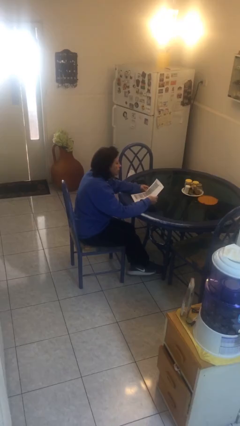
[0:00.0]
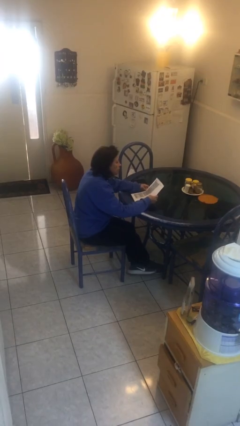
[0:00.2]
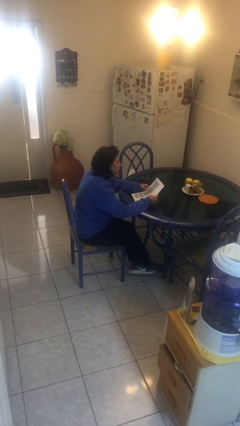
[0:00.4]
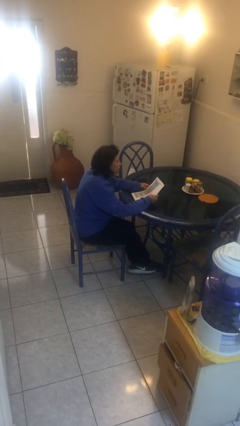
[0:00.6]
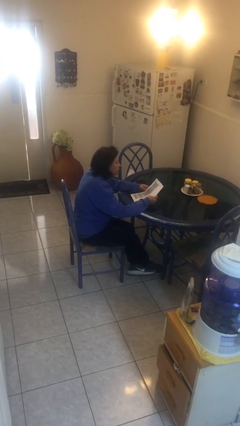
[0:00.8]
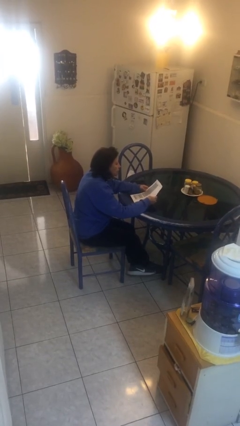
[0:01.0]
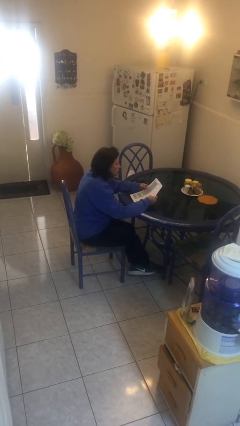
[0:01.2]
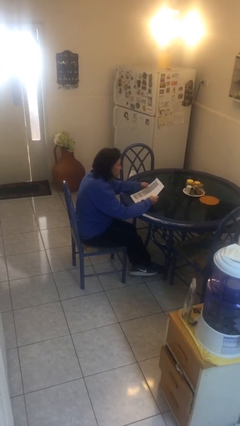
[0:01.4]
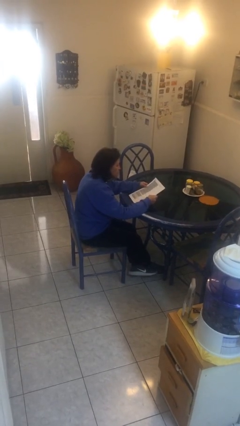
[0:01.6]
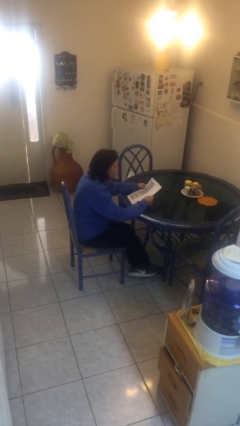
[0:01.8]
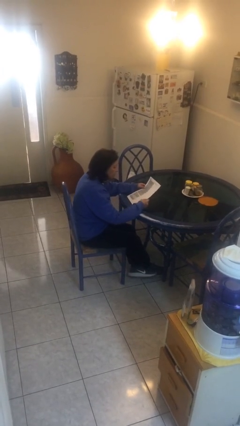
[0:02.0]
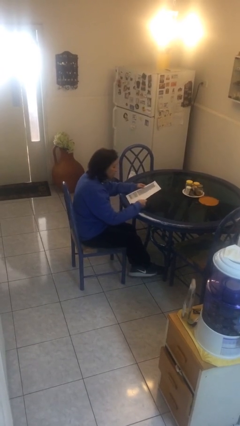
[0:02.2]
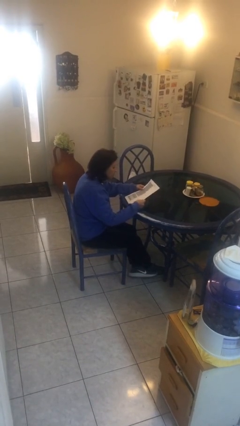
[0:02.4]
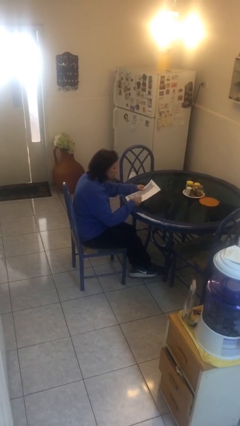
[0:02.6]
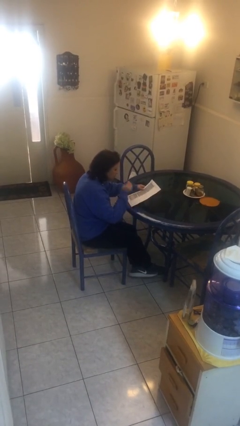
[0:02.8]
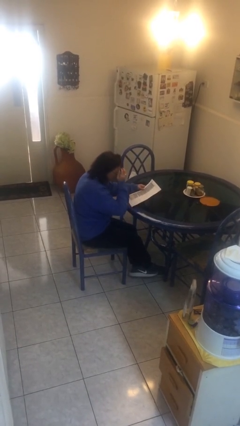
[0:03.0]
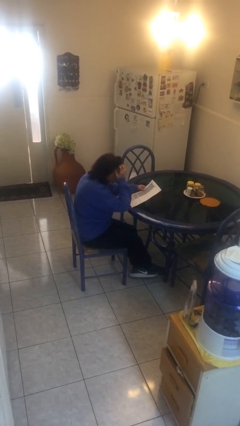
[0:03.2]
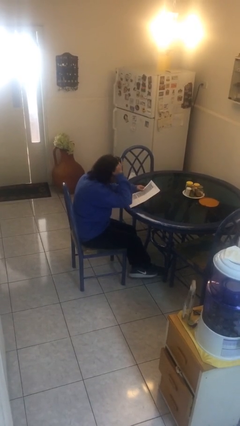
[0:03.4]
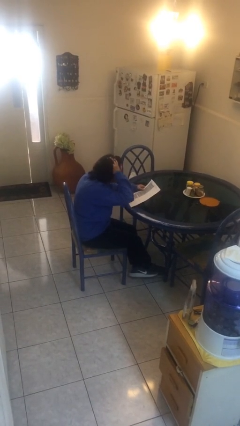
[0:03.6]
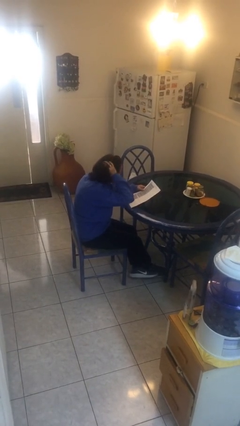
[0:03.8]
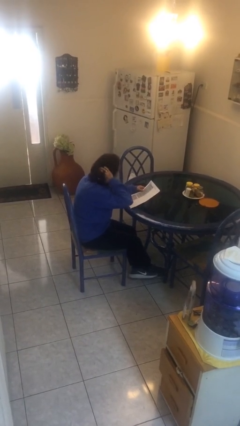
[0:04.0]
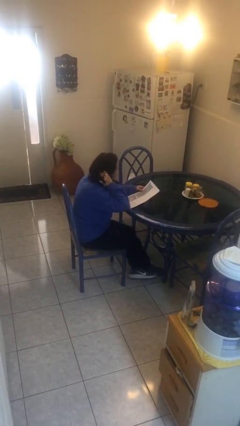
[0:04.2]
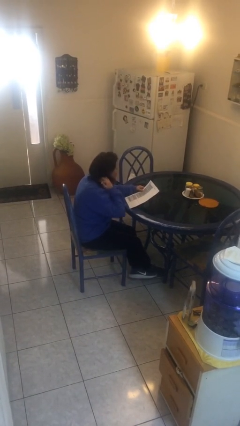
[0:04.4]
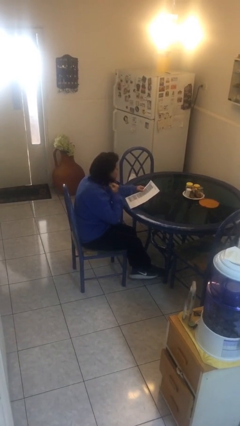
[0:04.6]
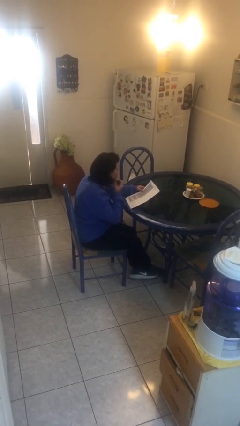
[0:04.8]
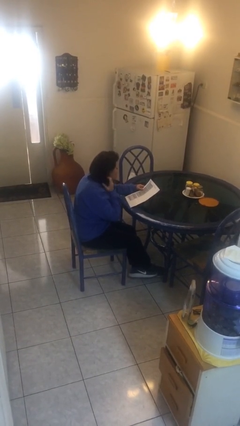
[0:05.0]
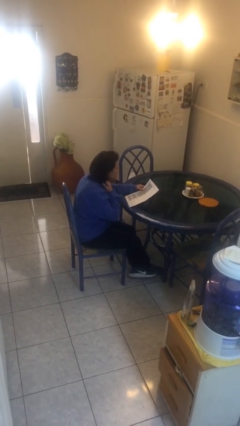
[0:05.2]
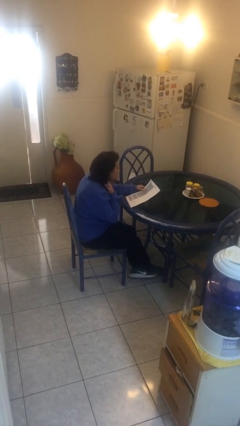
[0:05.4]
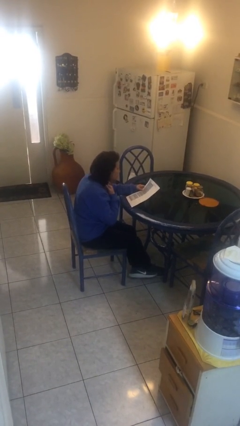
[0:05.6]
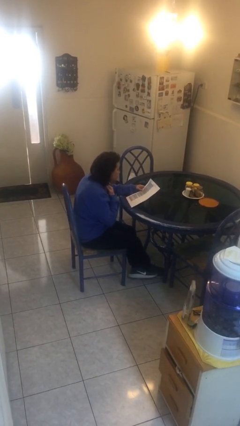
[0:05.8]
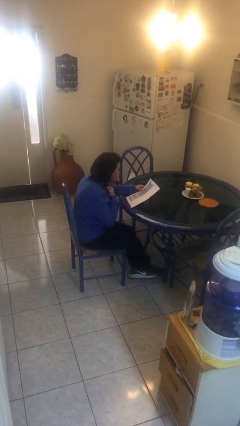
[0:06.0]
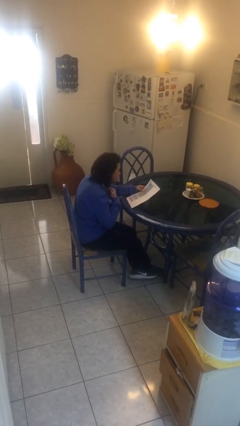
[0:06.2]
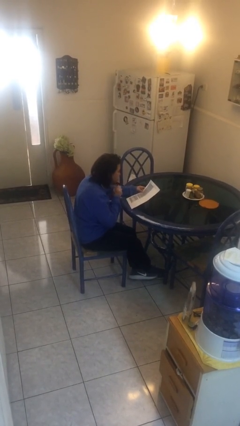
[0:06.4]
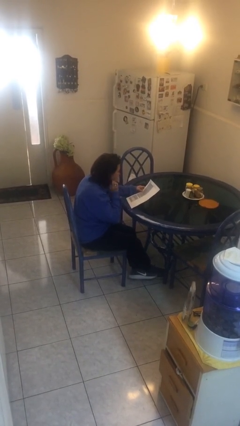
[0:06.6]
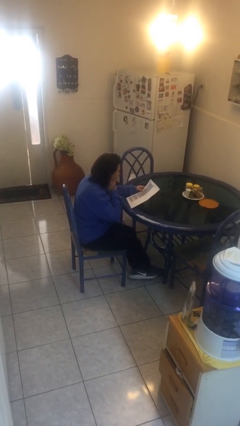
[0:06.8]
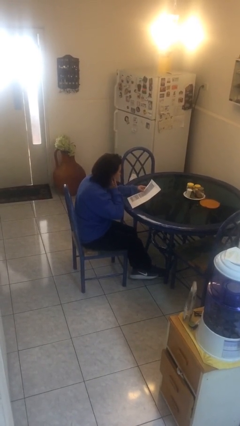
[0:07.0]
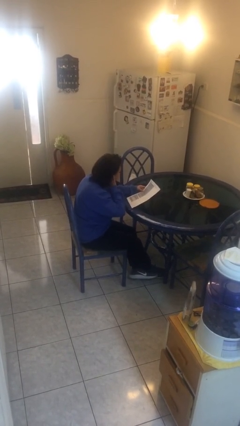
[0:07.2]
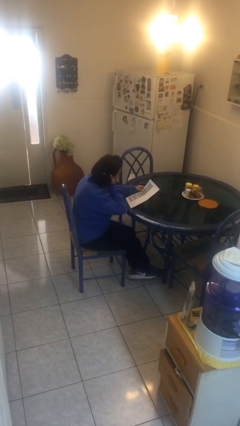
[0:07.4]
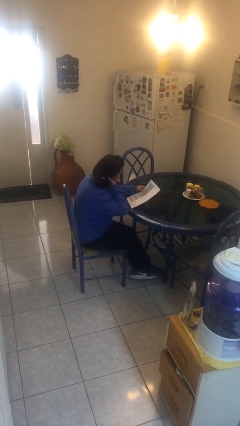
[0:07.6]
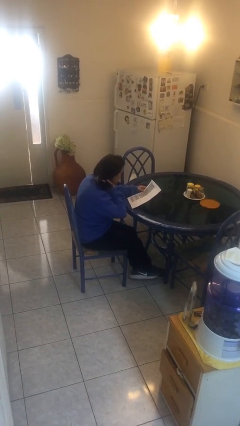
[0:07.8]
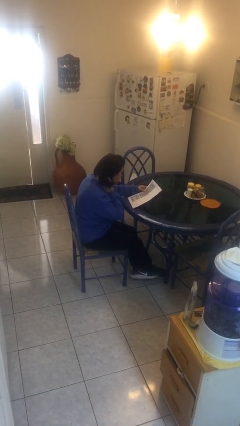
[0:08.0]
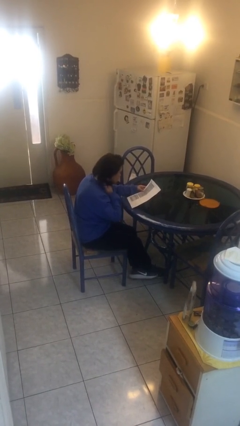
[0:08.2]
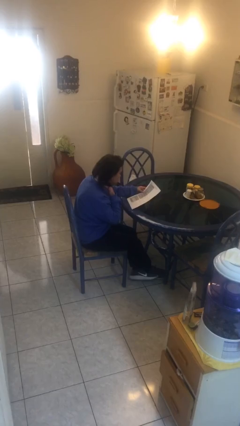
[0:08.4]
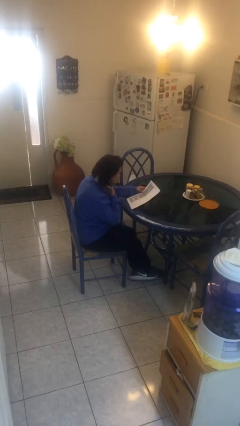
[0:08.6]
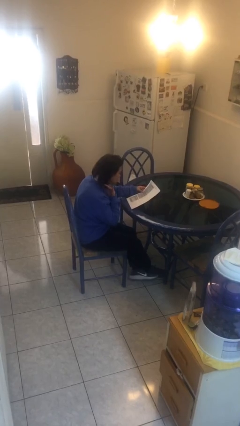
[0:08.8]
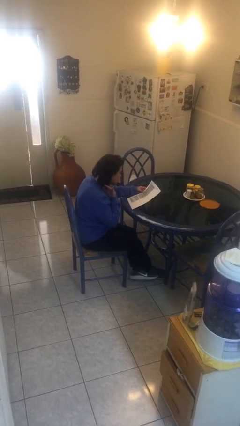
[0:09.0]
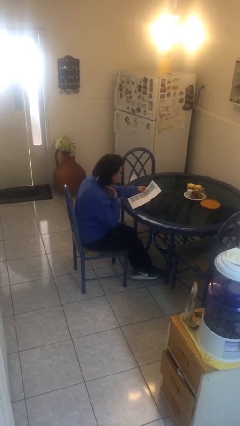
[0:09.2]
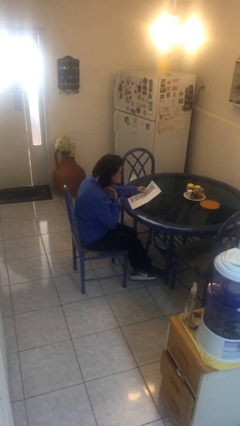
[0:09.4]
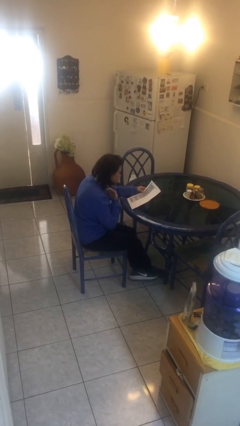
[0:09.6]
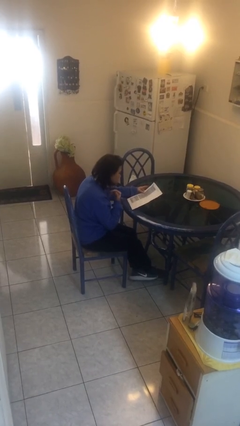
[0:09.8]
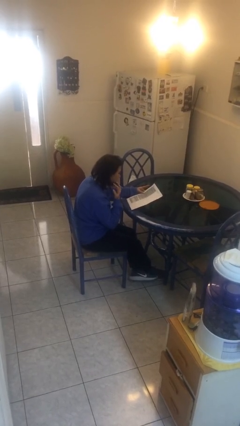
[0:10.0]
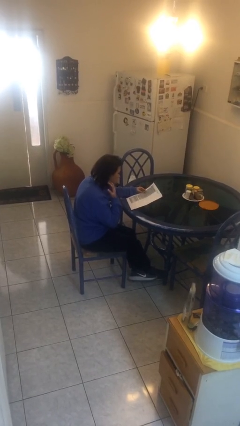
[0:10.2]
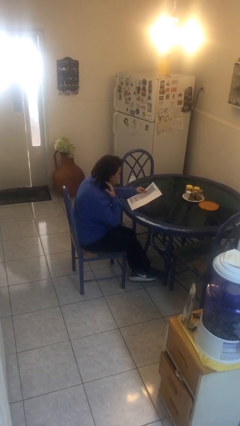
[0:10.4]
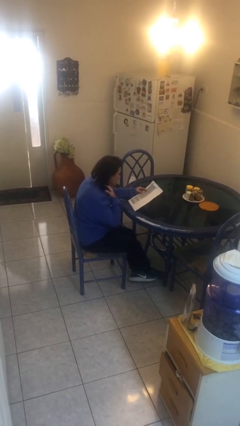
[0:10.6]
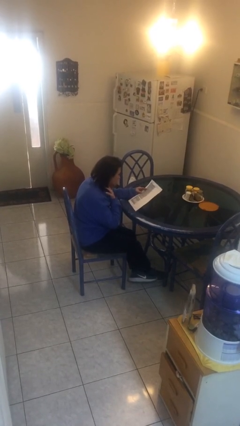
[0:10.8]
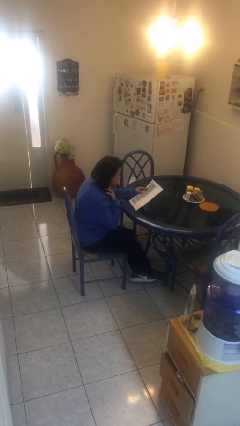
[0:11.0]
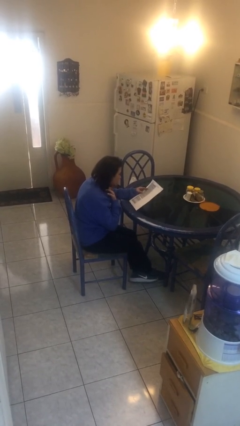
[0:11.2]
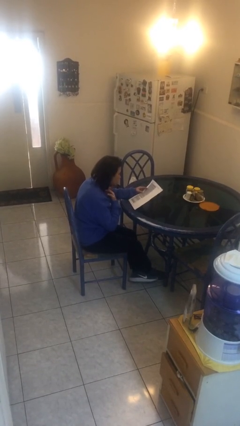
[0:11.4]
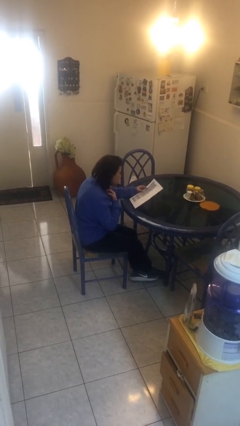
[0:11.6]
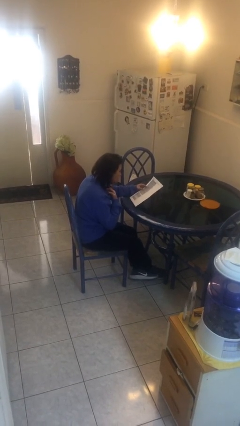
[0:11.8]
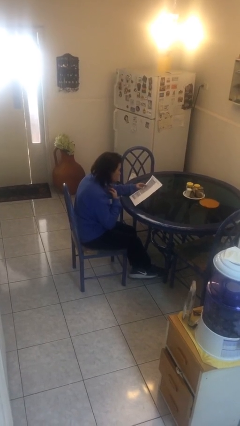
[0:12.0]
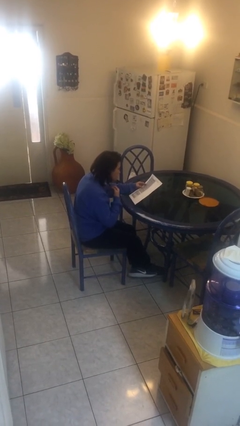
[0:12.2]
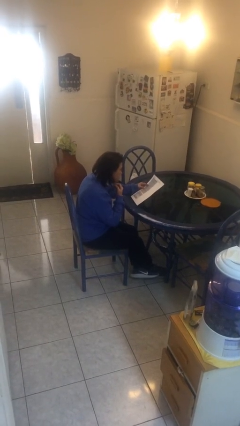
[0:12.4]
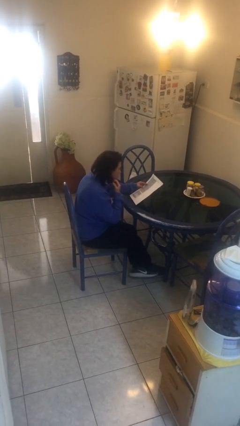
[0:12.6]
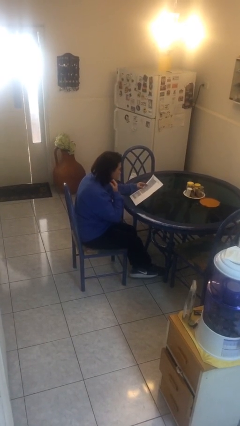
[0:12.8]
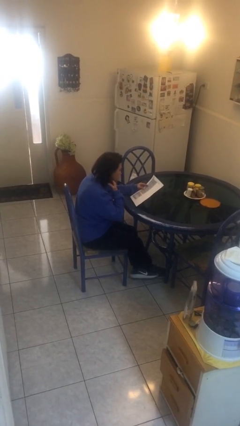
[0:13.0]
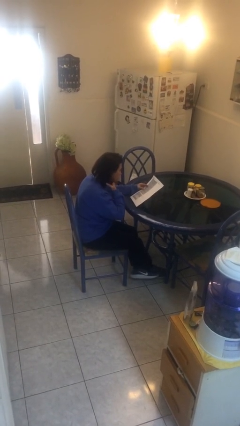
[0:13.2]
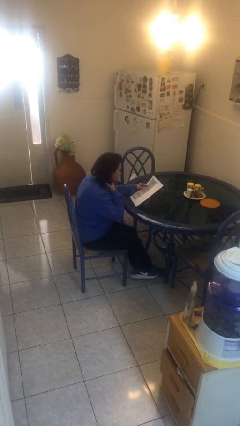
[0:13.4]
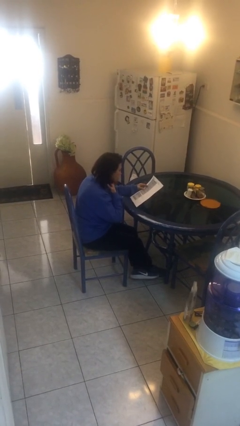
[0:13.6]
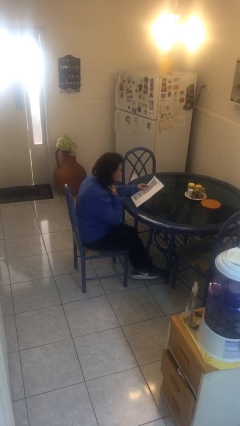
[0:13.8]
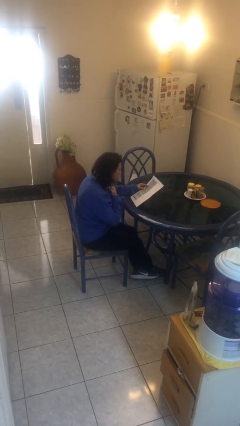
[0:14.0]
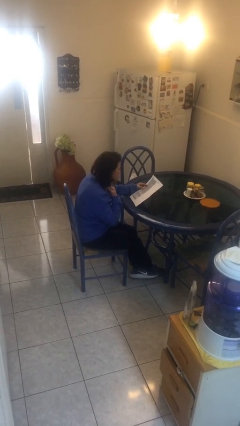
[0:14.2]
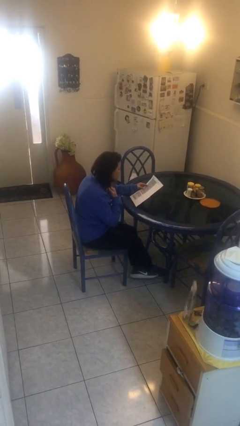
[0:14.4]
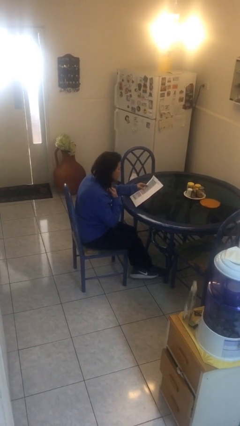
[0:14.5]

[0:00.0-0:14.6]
person reads document

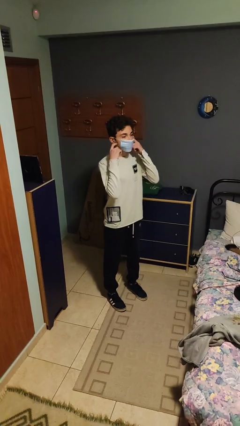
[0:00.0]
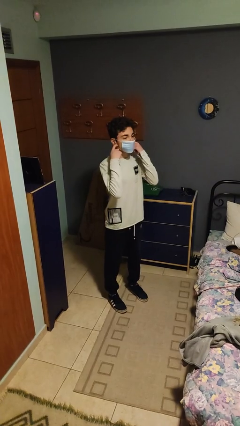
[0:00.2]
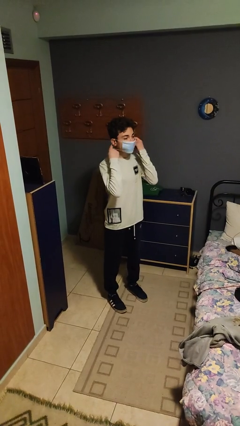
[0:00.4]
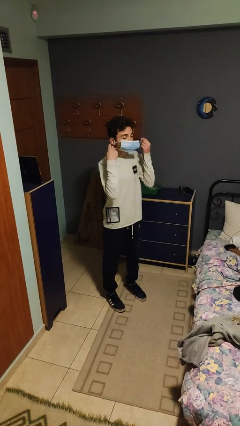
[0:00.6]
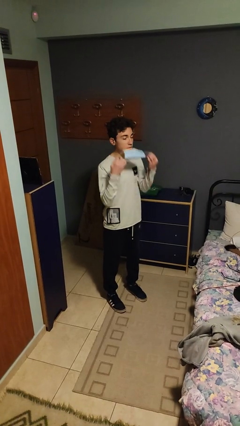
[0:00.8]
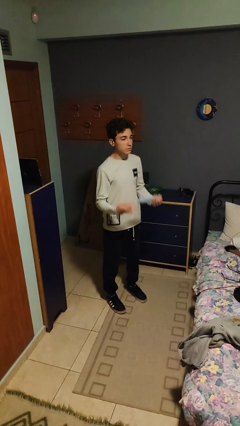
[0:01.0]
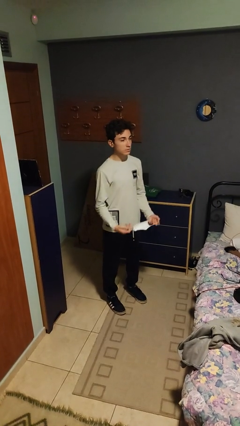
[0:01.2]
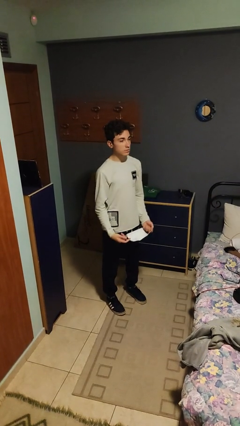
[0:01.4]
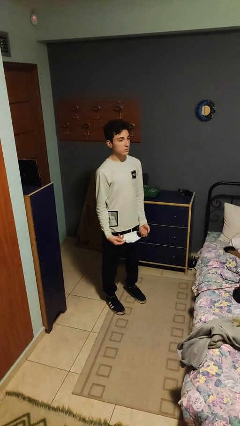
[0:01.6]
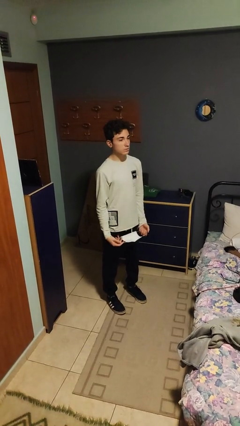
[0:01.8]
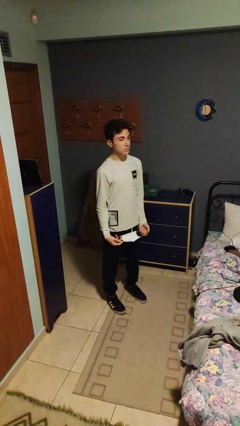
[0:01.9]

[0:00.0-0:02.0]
person takes off facemask

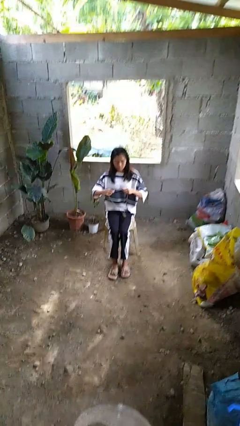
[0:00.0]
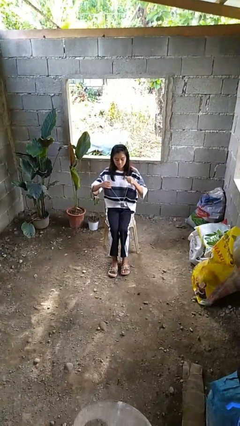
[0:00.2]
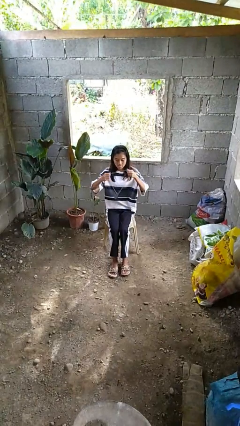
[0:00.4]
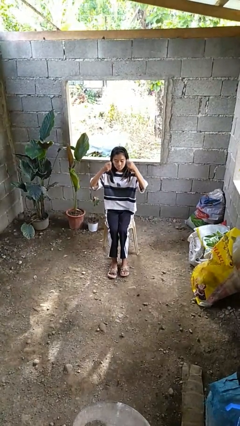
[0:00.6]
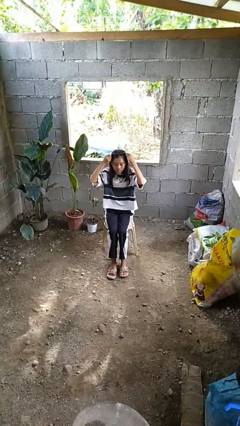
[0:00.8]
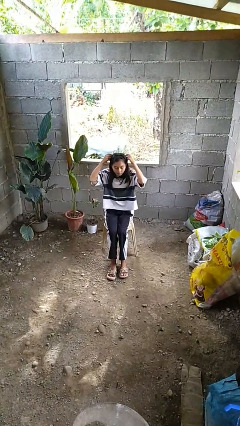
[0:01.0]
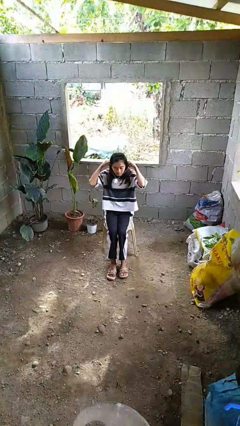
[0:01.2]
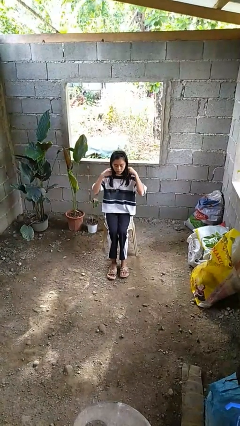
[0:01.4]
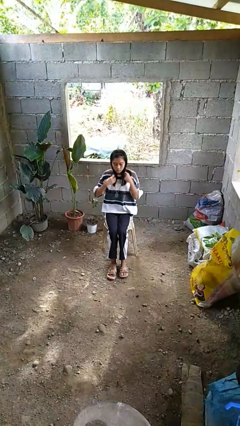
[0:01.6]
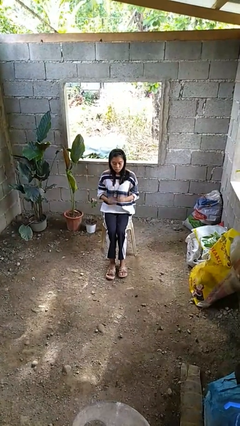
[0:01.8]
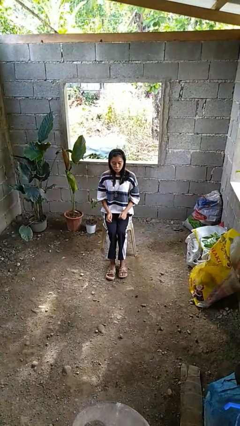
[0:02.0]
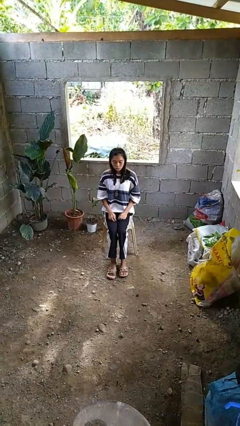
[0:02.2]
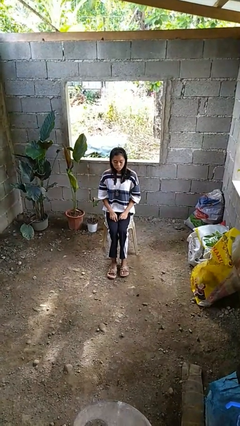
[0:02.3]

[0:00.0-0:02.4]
person puts on necklace
